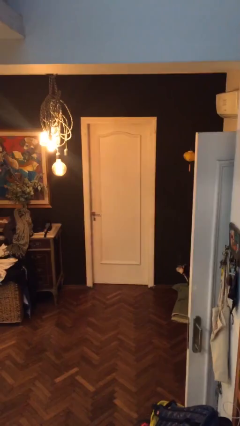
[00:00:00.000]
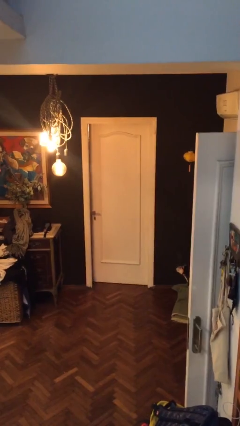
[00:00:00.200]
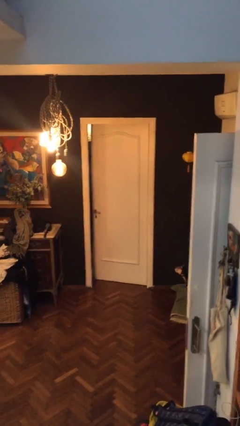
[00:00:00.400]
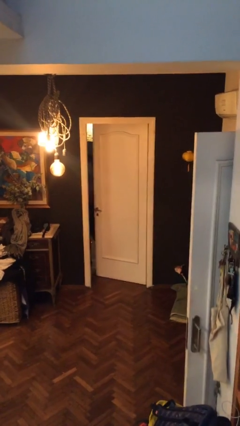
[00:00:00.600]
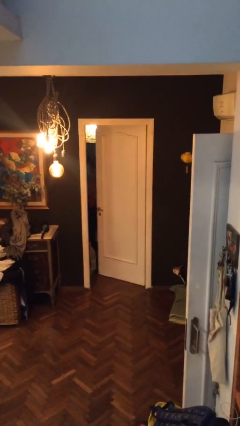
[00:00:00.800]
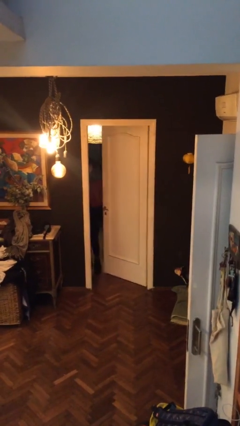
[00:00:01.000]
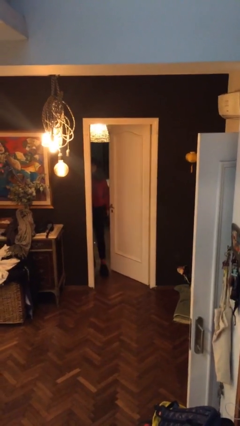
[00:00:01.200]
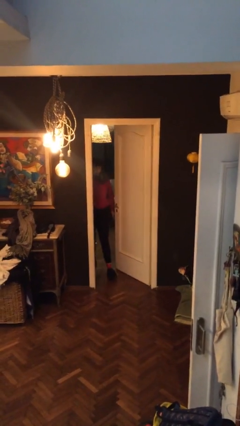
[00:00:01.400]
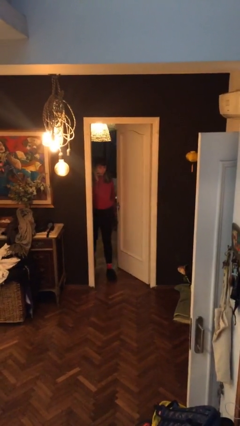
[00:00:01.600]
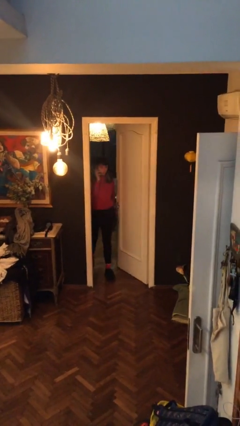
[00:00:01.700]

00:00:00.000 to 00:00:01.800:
person opens facility door

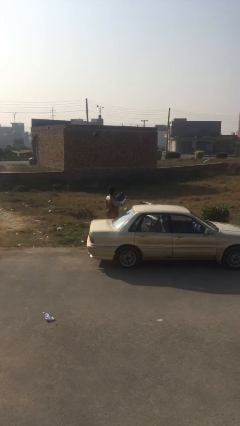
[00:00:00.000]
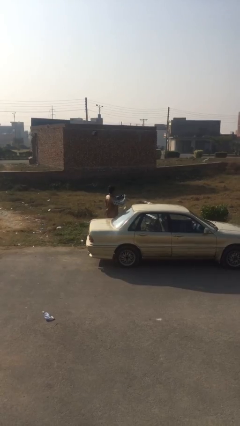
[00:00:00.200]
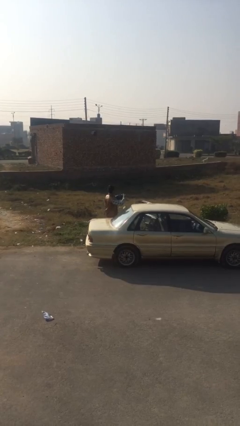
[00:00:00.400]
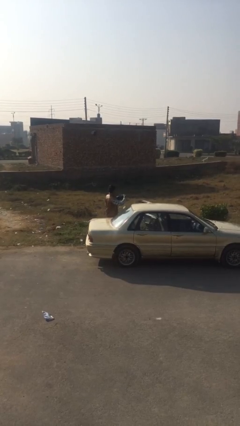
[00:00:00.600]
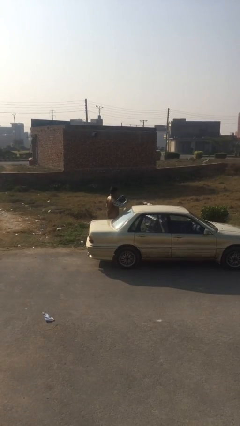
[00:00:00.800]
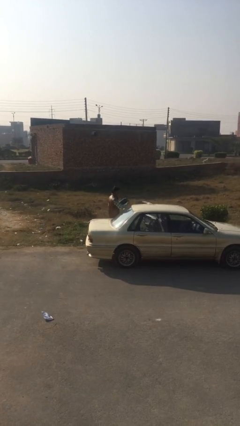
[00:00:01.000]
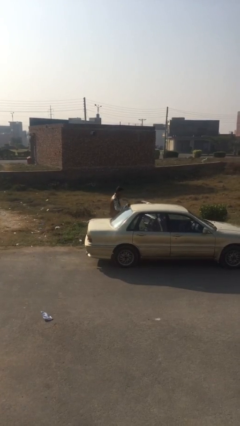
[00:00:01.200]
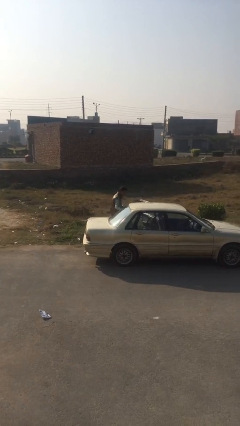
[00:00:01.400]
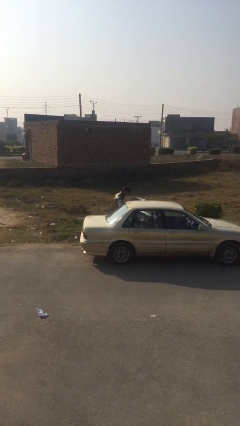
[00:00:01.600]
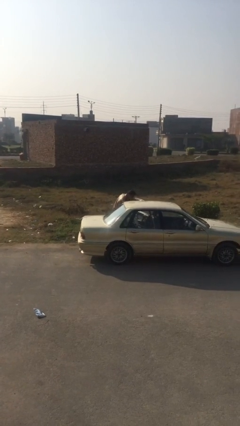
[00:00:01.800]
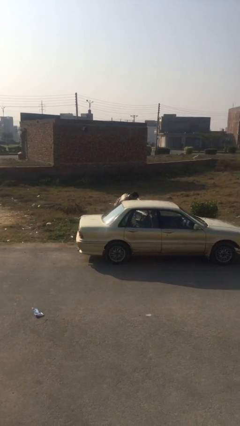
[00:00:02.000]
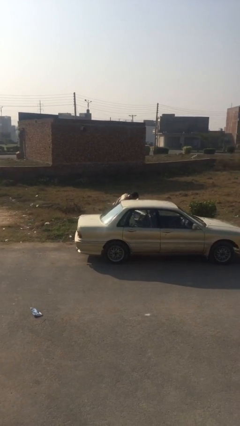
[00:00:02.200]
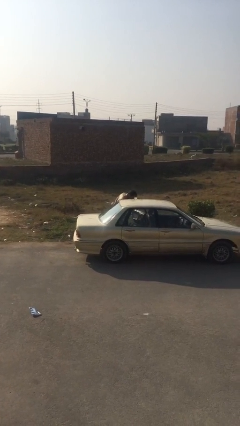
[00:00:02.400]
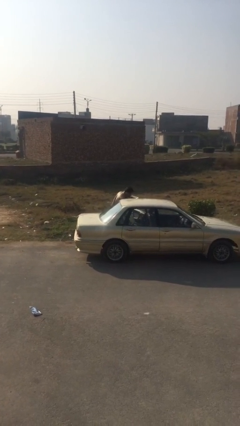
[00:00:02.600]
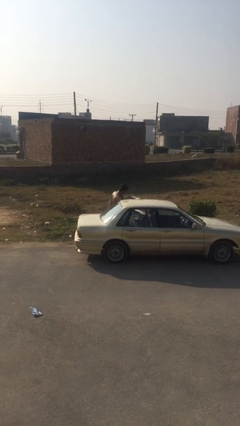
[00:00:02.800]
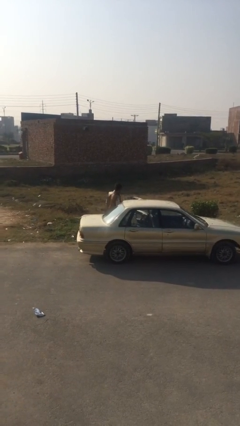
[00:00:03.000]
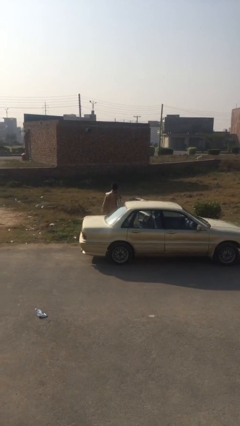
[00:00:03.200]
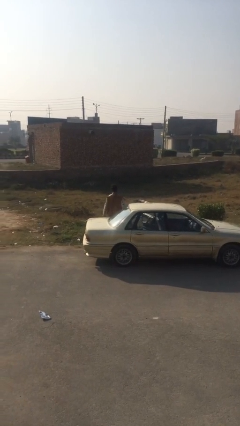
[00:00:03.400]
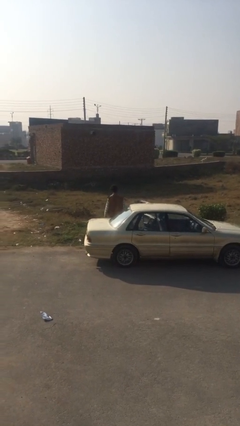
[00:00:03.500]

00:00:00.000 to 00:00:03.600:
person loads car

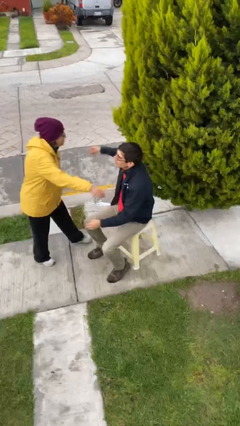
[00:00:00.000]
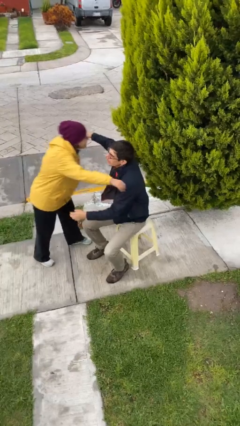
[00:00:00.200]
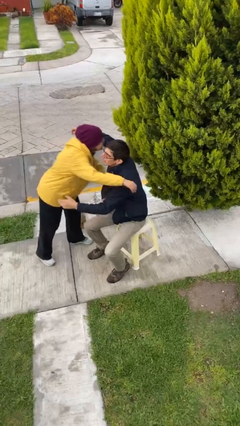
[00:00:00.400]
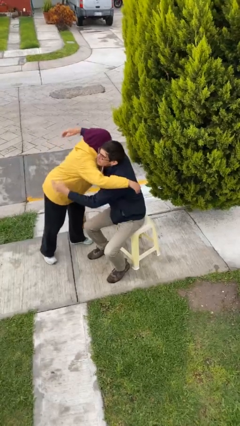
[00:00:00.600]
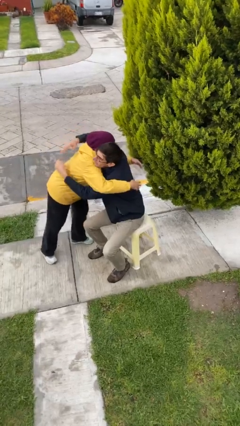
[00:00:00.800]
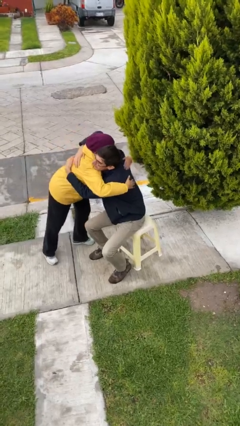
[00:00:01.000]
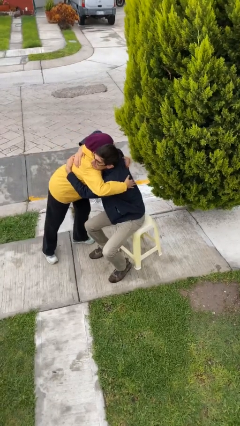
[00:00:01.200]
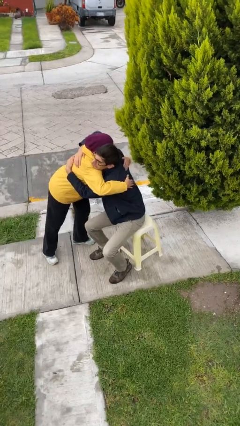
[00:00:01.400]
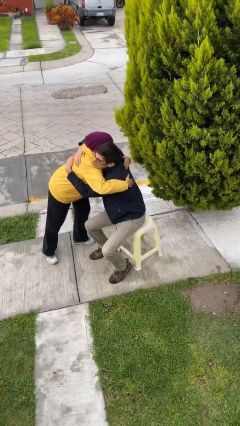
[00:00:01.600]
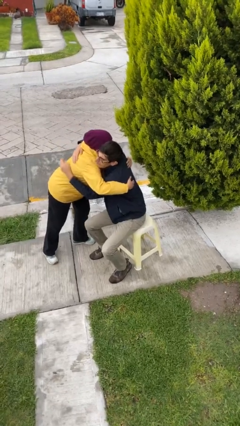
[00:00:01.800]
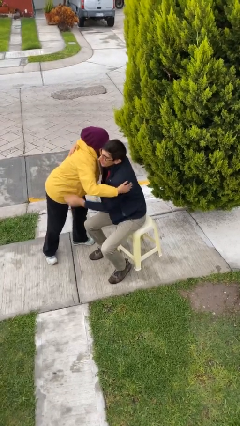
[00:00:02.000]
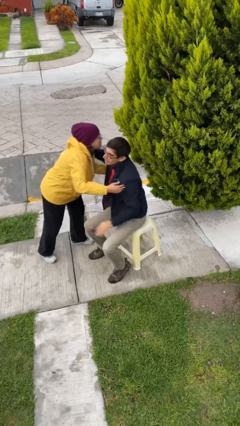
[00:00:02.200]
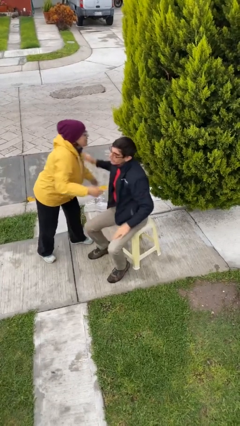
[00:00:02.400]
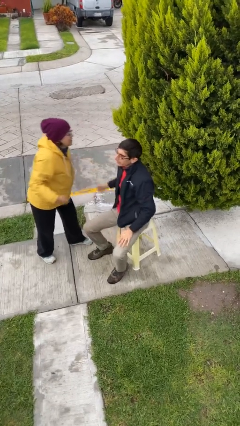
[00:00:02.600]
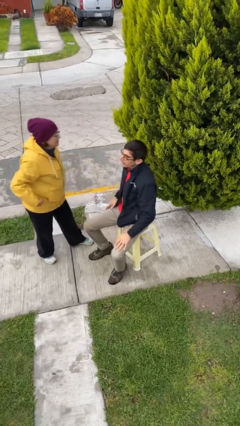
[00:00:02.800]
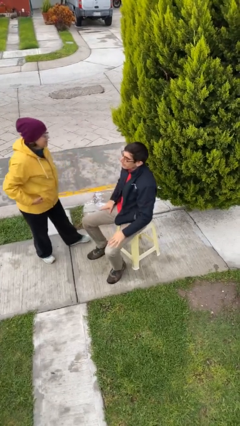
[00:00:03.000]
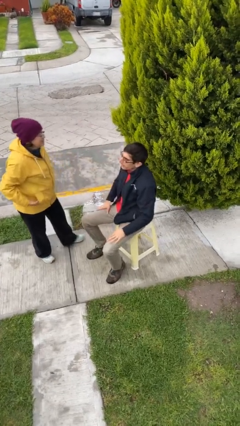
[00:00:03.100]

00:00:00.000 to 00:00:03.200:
person embraces person

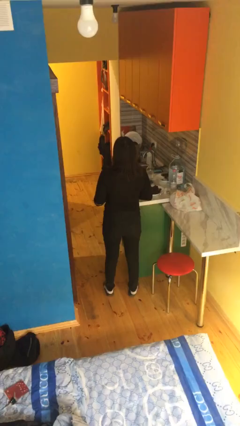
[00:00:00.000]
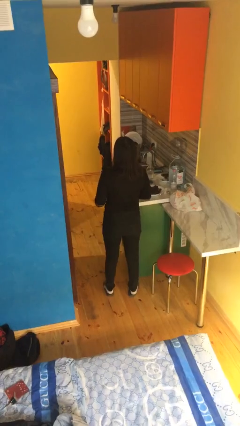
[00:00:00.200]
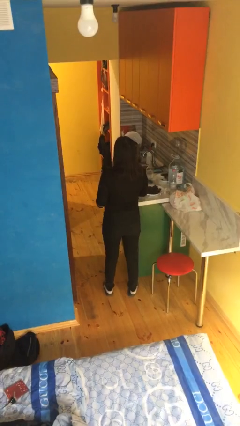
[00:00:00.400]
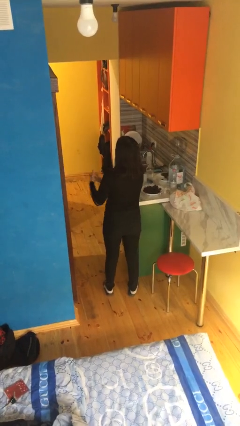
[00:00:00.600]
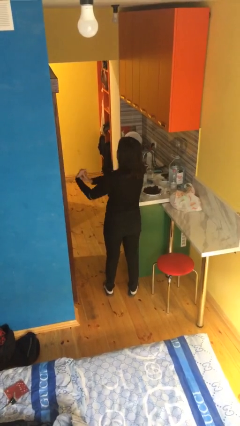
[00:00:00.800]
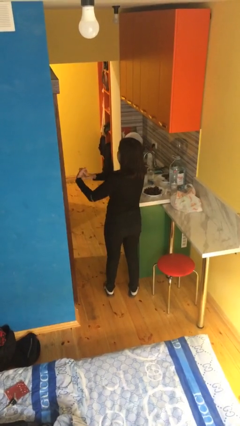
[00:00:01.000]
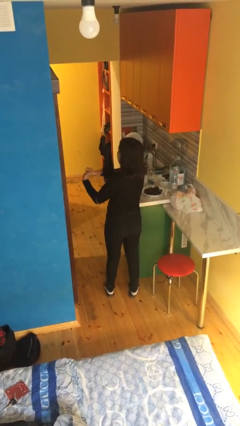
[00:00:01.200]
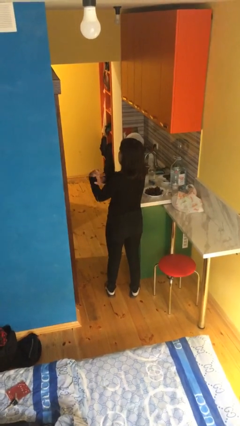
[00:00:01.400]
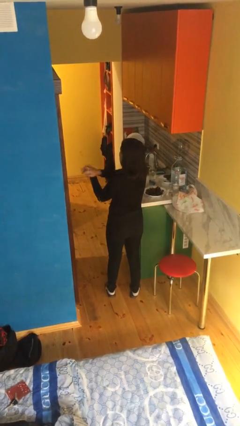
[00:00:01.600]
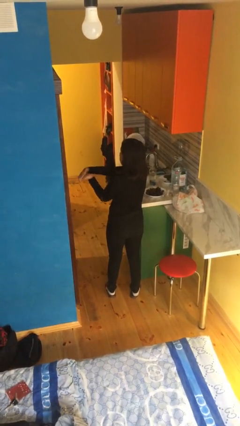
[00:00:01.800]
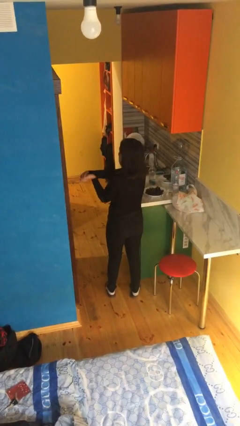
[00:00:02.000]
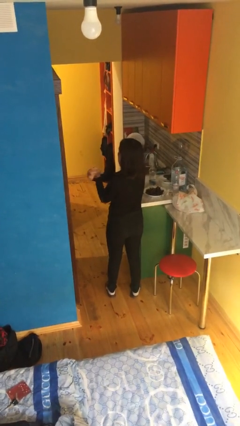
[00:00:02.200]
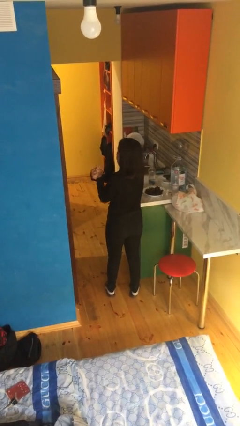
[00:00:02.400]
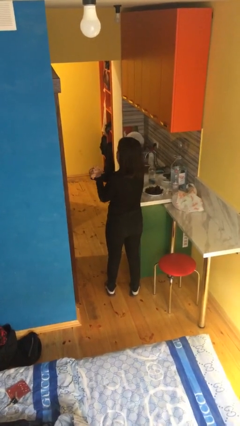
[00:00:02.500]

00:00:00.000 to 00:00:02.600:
person cracks knuckles

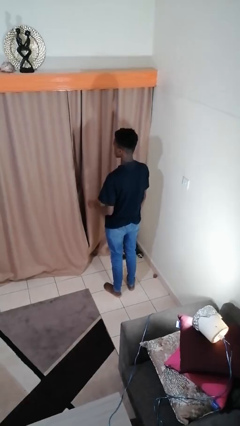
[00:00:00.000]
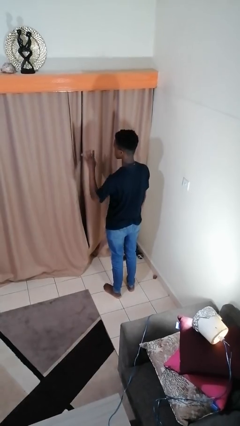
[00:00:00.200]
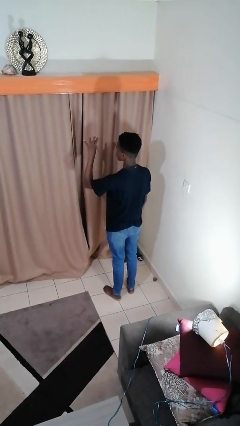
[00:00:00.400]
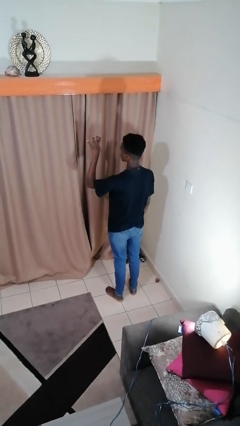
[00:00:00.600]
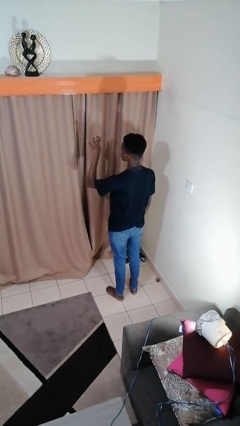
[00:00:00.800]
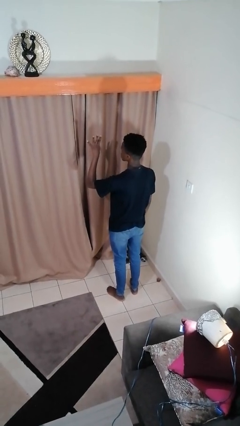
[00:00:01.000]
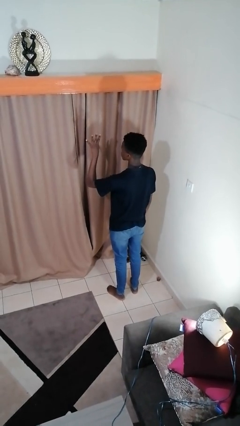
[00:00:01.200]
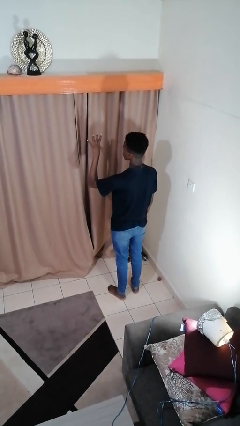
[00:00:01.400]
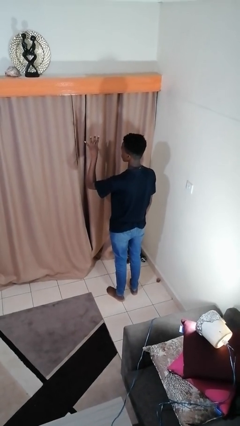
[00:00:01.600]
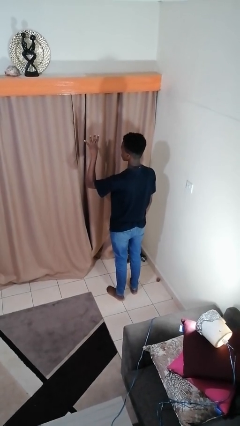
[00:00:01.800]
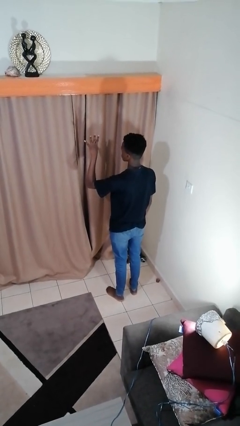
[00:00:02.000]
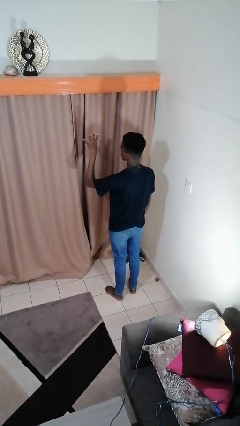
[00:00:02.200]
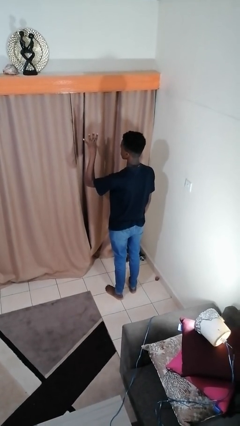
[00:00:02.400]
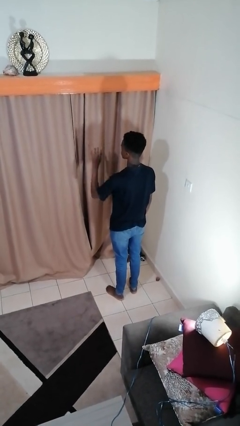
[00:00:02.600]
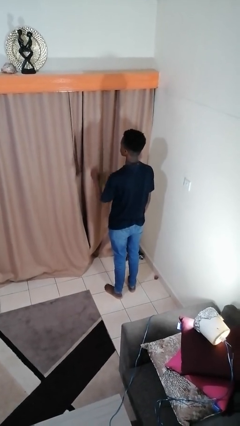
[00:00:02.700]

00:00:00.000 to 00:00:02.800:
person gestures number four

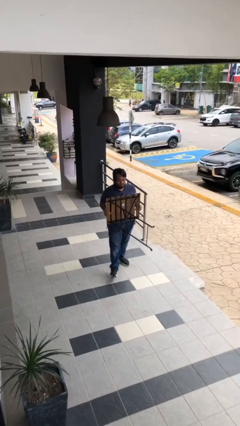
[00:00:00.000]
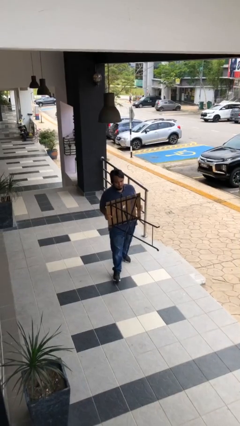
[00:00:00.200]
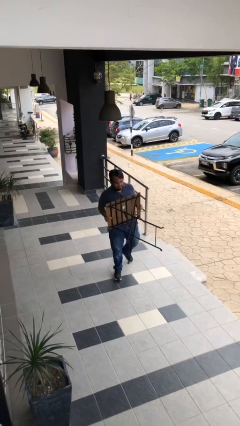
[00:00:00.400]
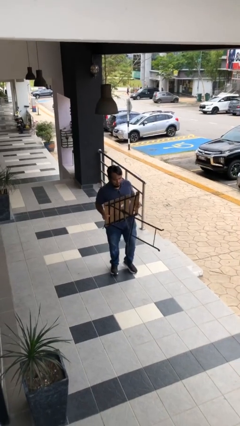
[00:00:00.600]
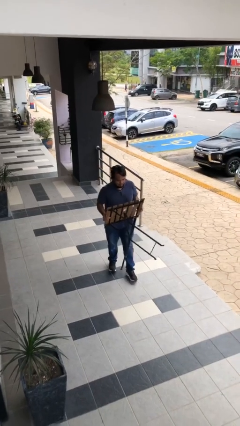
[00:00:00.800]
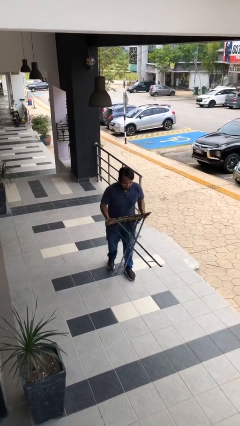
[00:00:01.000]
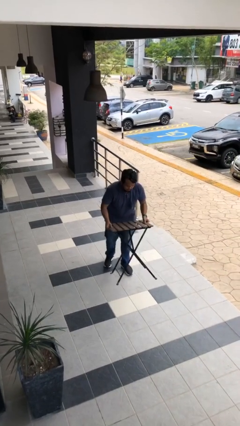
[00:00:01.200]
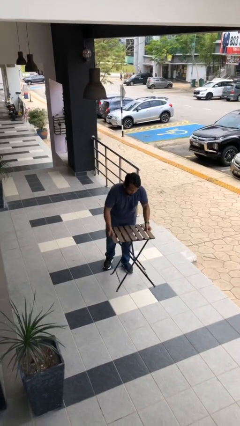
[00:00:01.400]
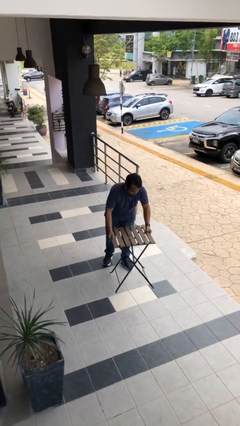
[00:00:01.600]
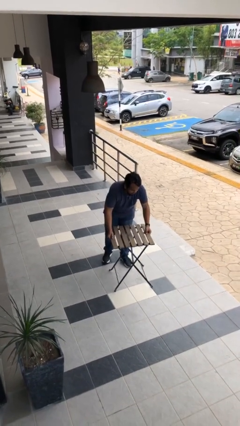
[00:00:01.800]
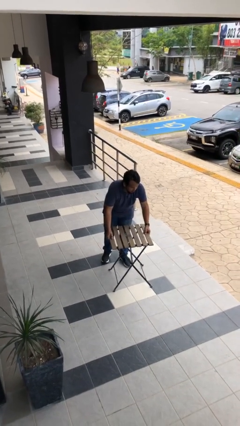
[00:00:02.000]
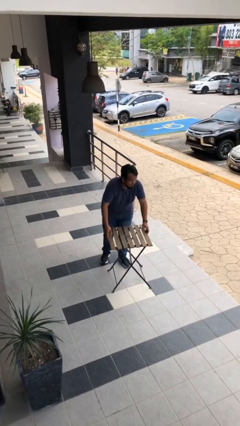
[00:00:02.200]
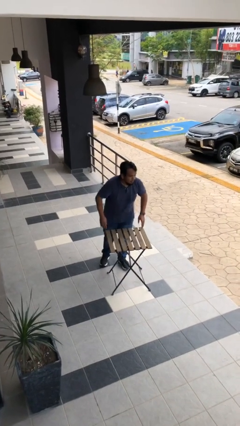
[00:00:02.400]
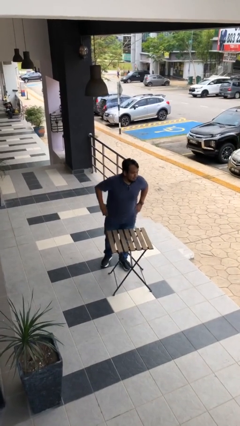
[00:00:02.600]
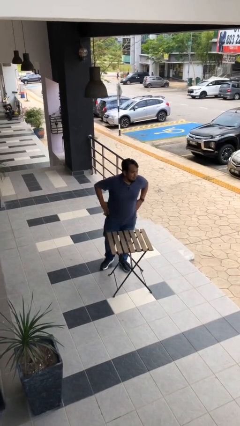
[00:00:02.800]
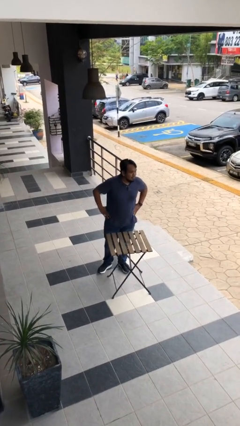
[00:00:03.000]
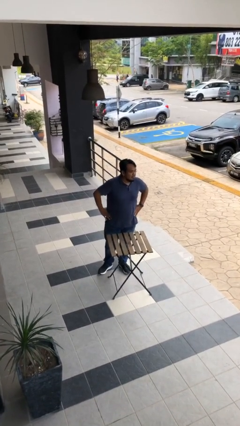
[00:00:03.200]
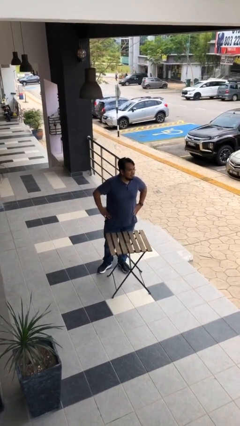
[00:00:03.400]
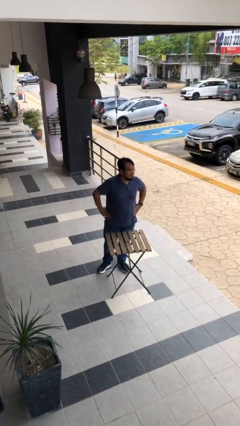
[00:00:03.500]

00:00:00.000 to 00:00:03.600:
person puts down object on floor
